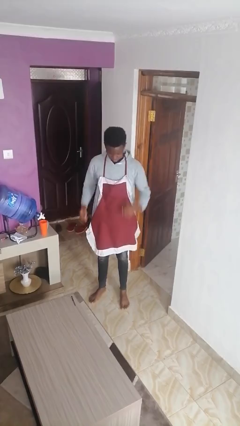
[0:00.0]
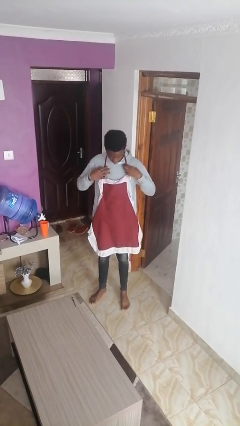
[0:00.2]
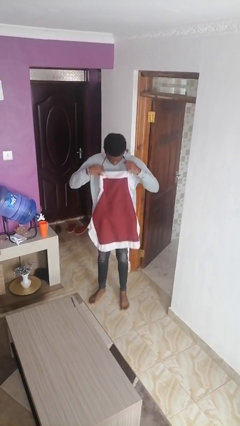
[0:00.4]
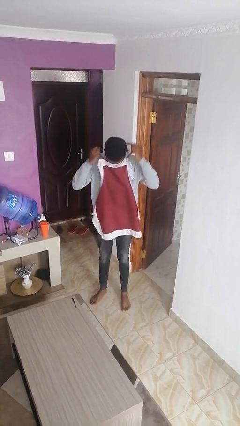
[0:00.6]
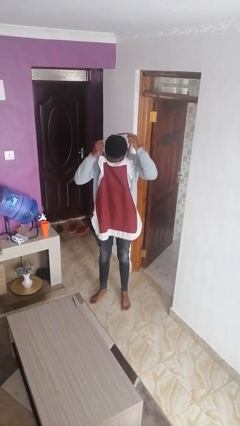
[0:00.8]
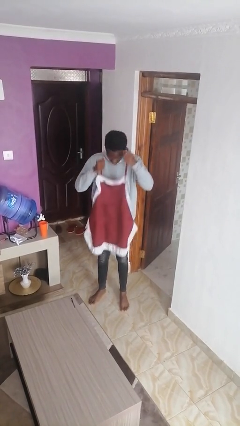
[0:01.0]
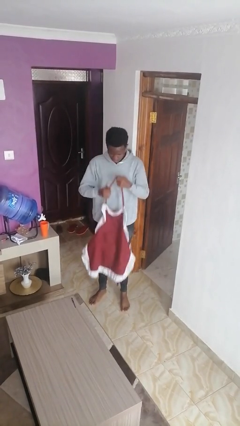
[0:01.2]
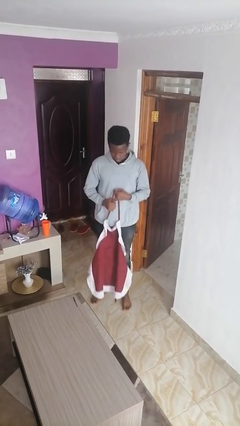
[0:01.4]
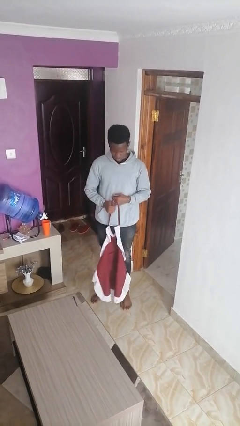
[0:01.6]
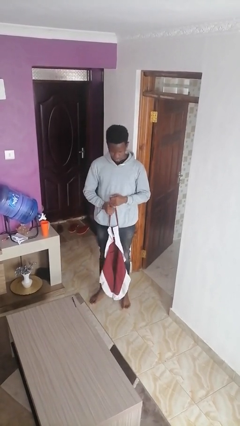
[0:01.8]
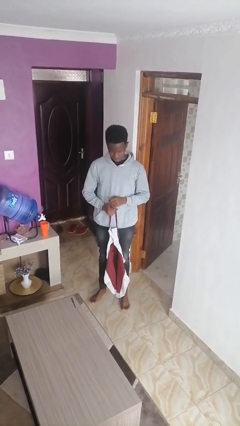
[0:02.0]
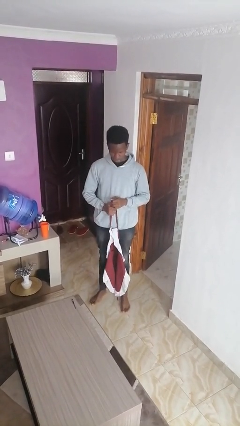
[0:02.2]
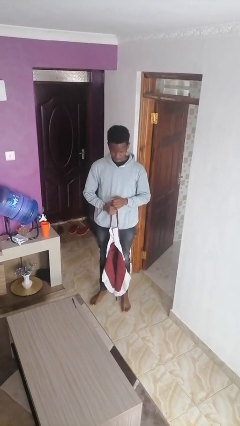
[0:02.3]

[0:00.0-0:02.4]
person takes off apron

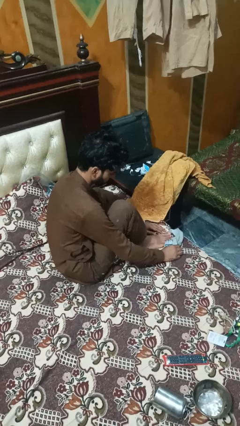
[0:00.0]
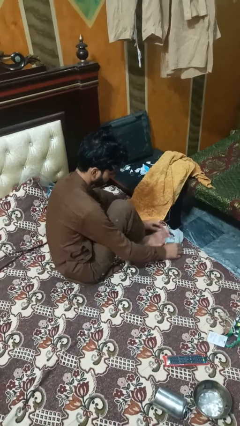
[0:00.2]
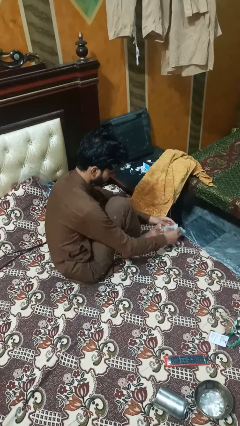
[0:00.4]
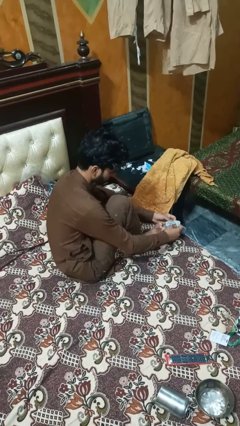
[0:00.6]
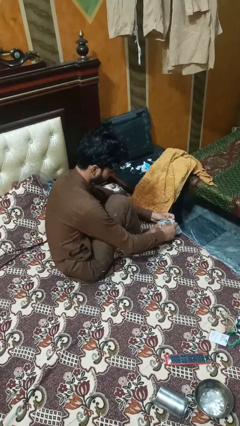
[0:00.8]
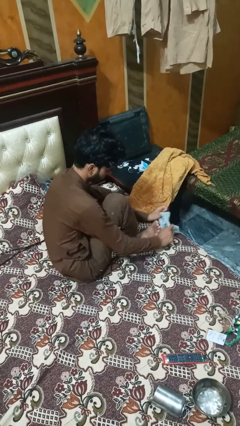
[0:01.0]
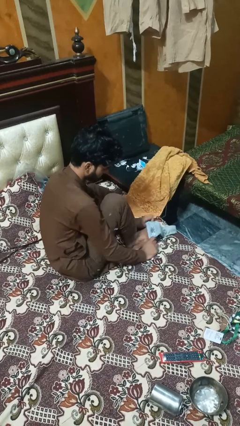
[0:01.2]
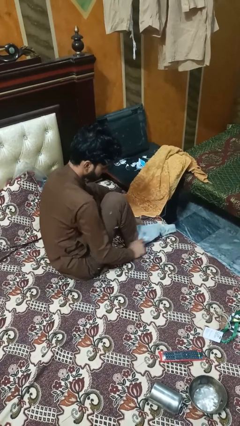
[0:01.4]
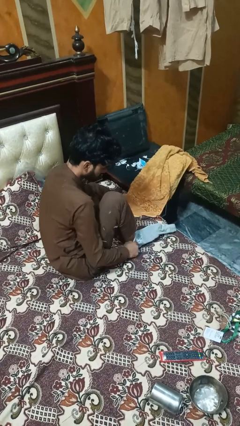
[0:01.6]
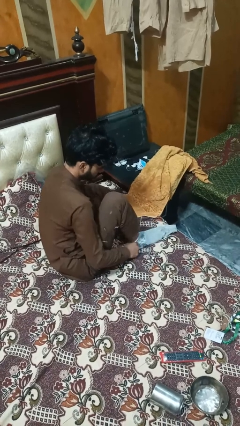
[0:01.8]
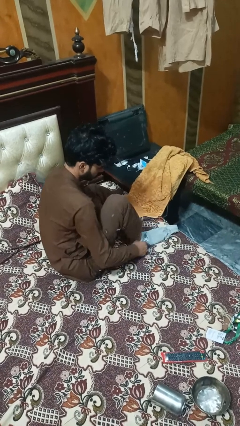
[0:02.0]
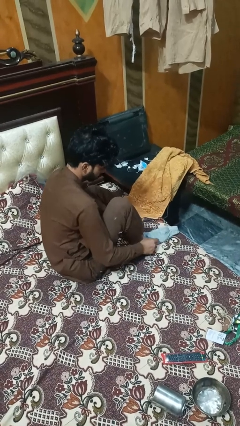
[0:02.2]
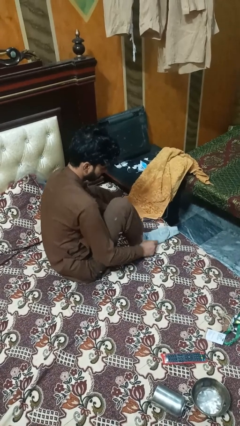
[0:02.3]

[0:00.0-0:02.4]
person puts on socks

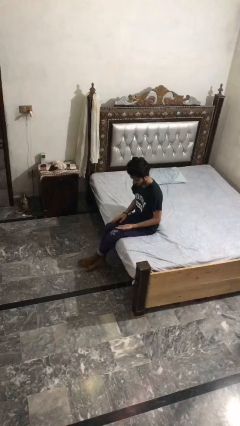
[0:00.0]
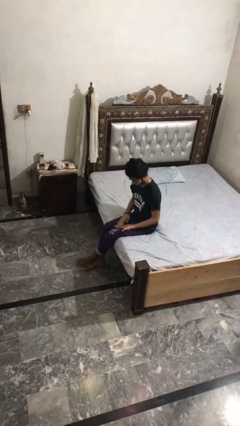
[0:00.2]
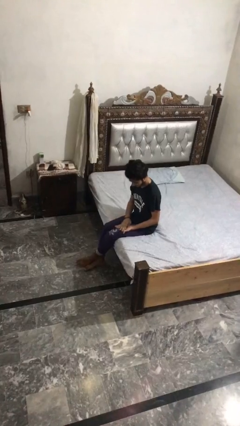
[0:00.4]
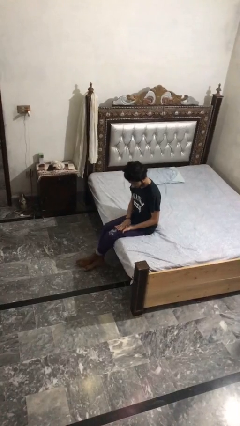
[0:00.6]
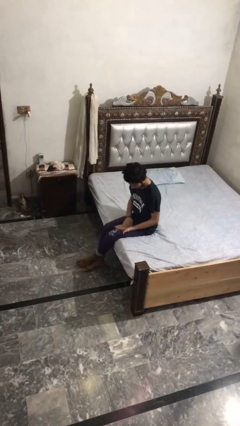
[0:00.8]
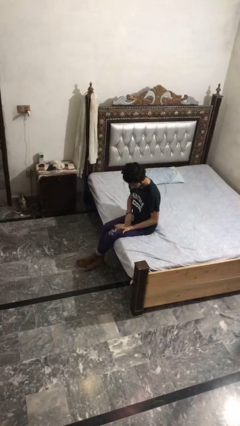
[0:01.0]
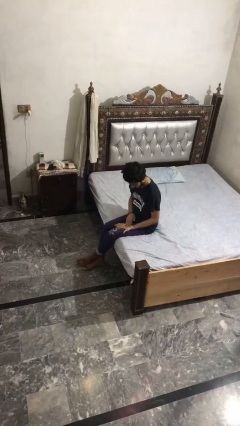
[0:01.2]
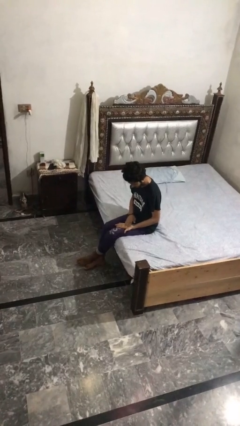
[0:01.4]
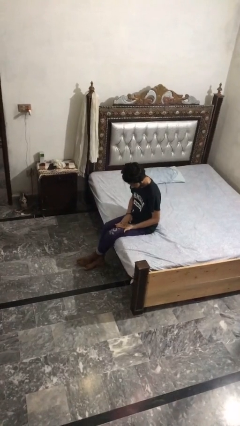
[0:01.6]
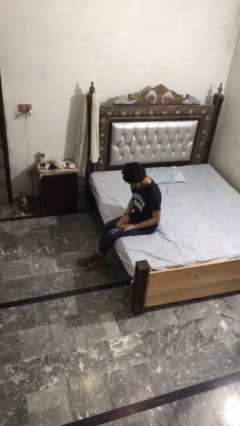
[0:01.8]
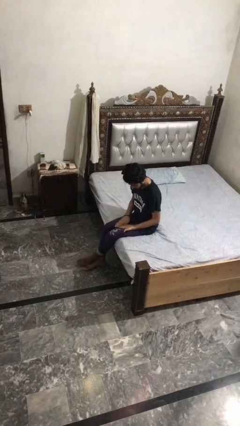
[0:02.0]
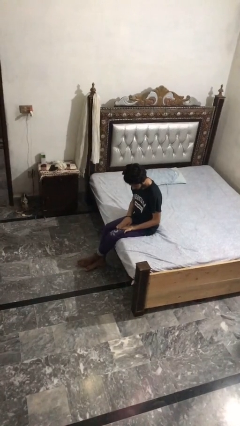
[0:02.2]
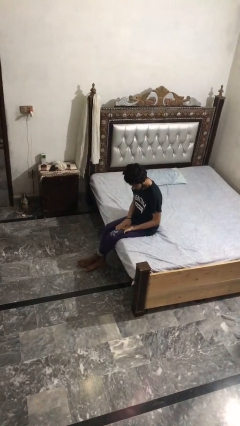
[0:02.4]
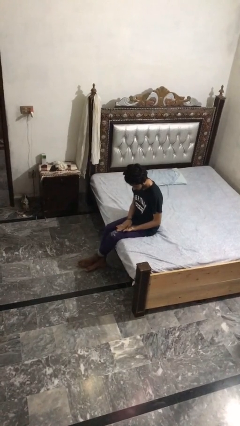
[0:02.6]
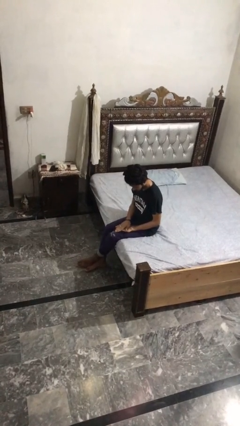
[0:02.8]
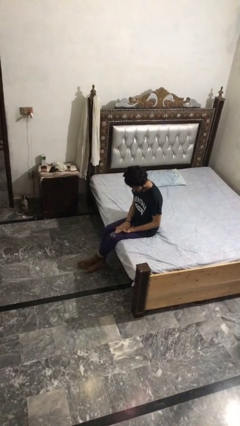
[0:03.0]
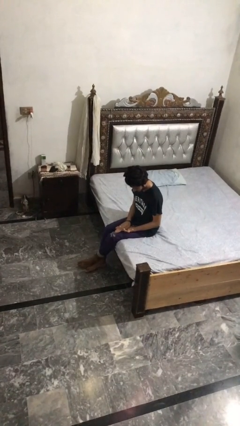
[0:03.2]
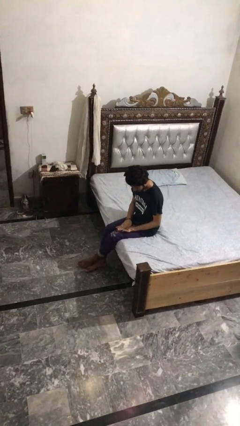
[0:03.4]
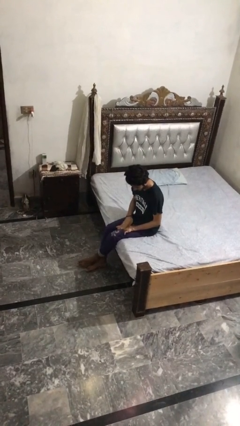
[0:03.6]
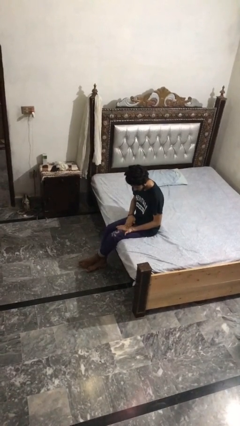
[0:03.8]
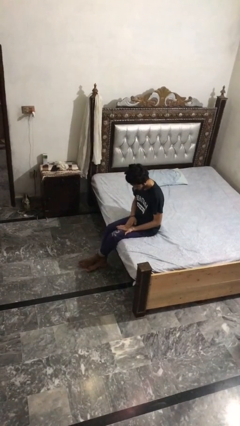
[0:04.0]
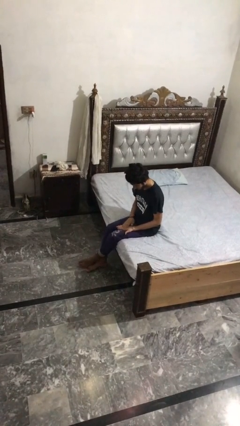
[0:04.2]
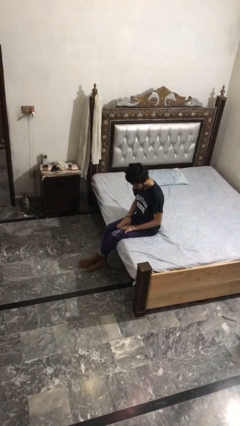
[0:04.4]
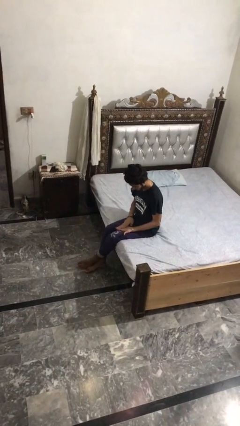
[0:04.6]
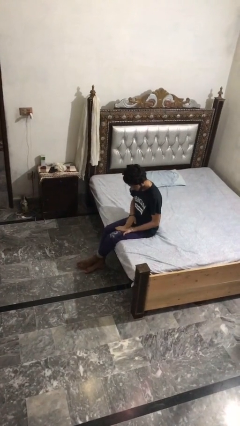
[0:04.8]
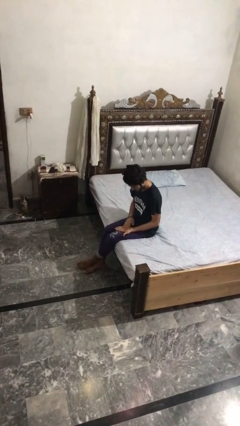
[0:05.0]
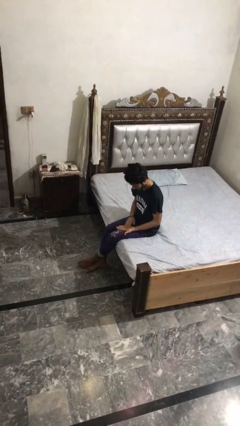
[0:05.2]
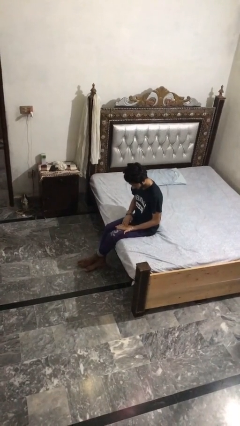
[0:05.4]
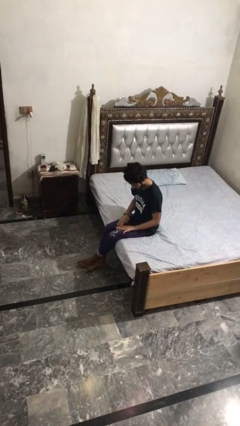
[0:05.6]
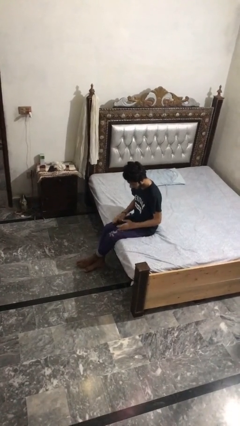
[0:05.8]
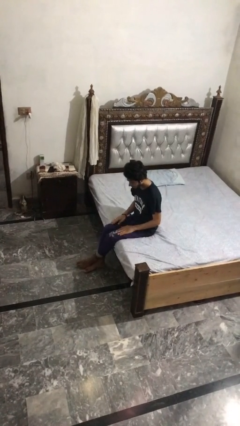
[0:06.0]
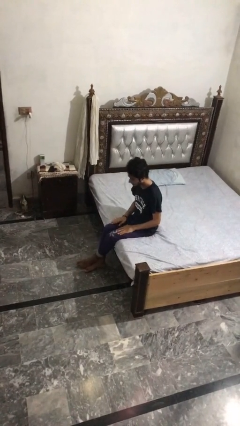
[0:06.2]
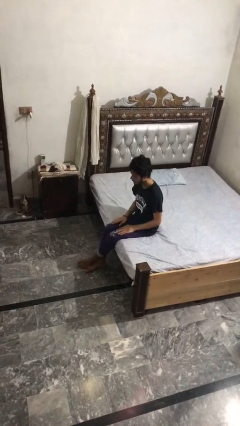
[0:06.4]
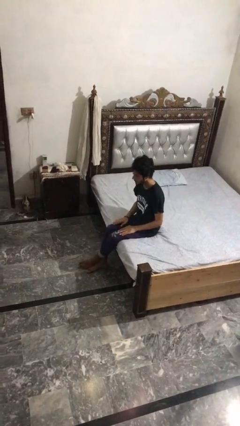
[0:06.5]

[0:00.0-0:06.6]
person looks at hands in lap

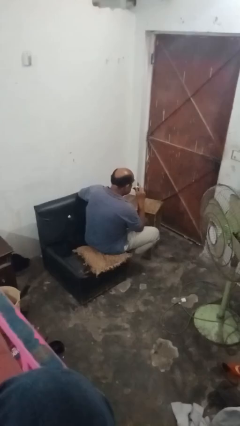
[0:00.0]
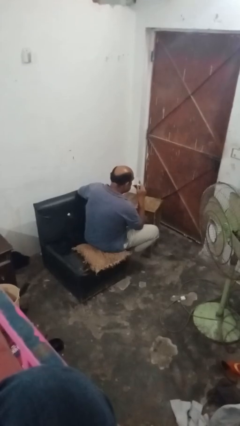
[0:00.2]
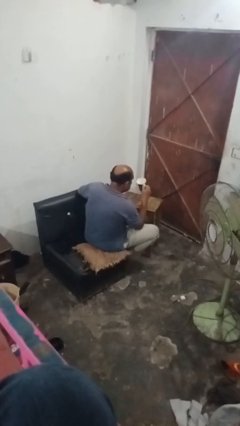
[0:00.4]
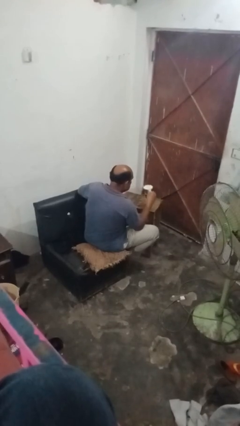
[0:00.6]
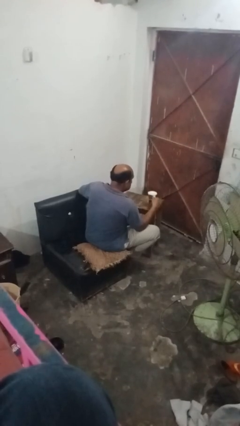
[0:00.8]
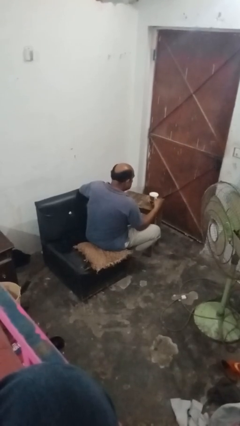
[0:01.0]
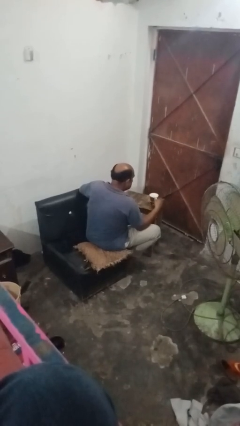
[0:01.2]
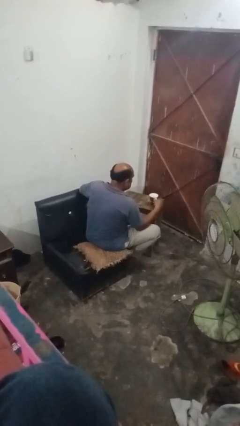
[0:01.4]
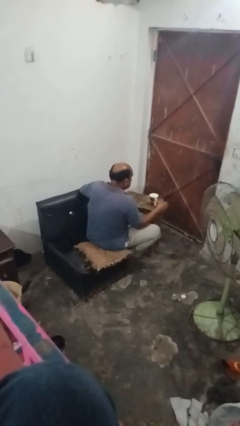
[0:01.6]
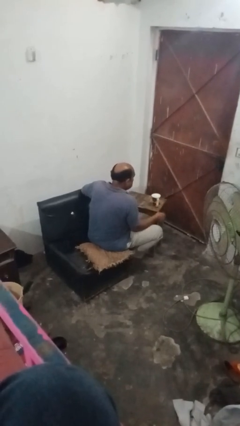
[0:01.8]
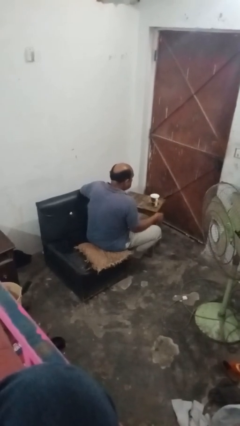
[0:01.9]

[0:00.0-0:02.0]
person puts down object on table

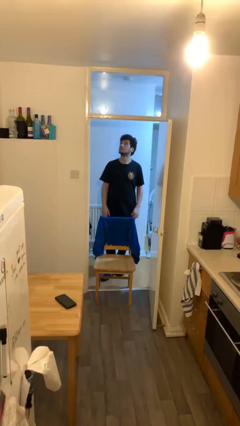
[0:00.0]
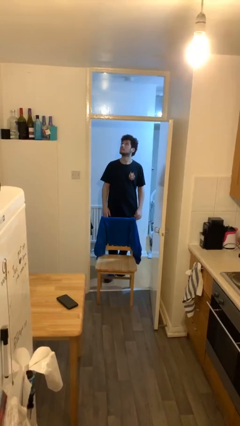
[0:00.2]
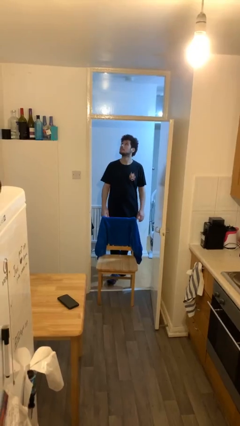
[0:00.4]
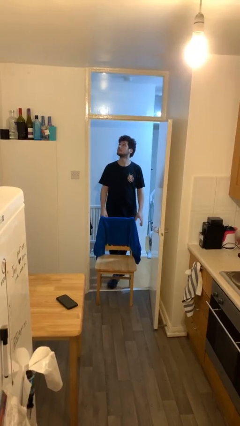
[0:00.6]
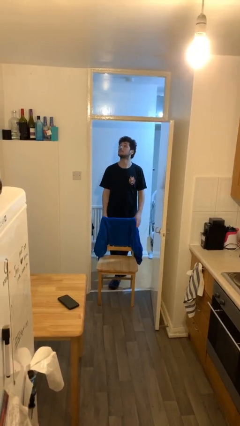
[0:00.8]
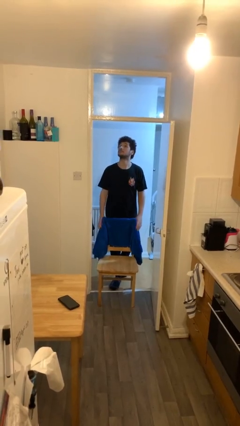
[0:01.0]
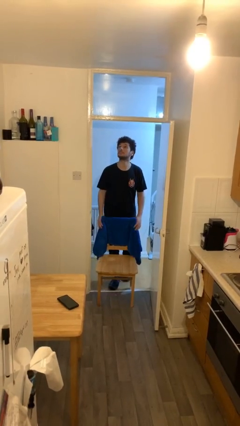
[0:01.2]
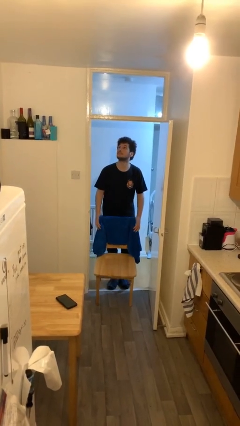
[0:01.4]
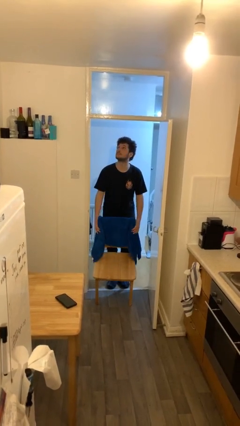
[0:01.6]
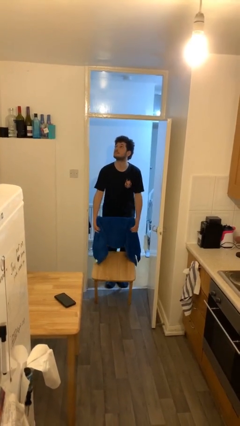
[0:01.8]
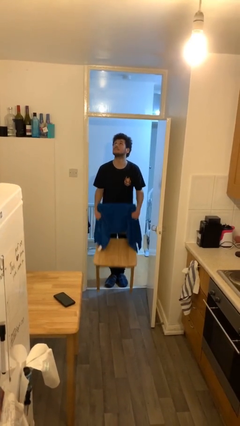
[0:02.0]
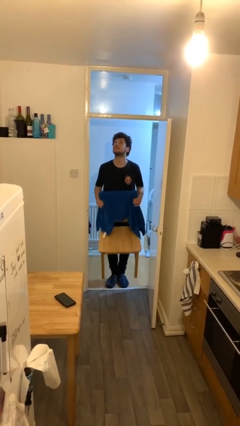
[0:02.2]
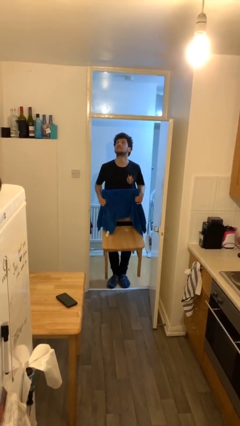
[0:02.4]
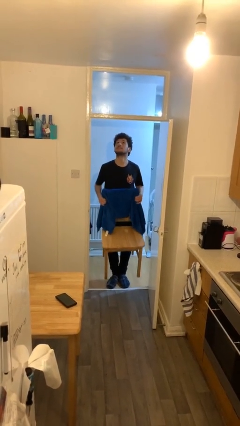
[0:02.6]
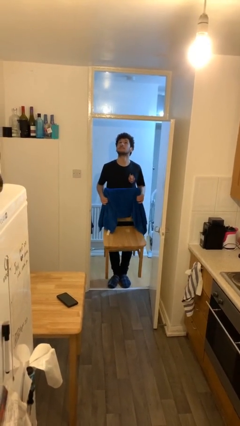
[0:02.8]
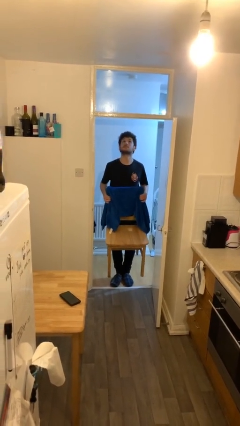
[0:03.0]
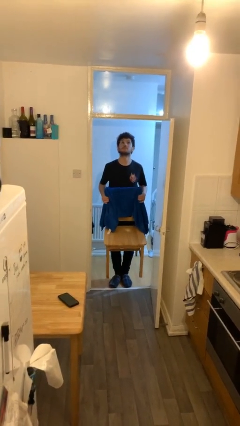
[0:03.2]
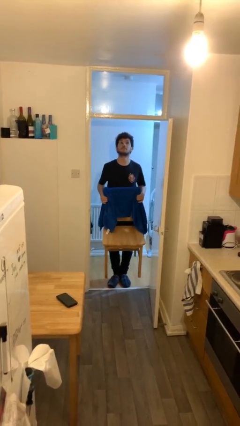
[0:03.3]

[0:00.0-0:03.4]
person picks up object from floor

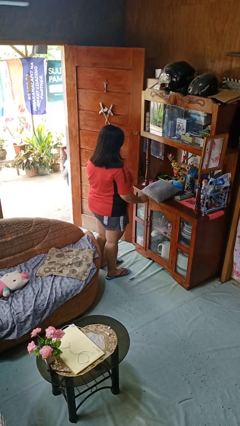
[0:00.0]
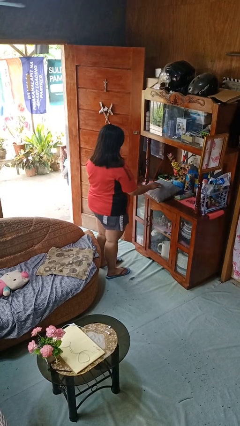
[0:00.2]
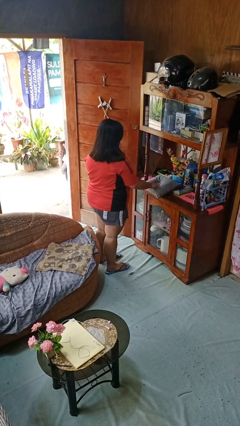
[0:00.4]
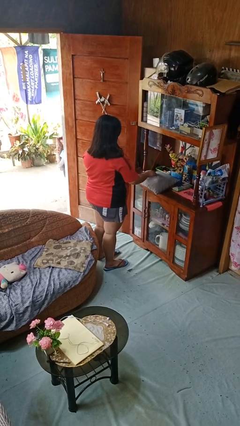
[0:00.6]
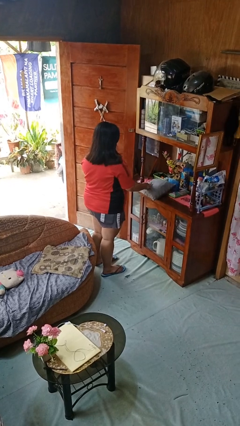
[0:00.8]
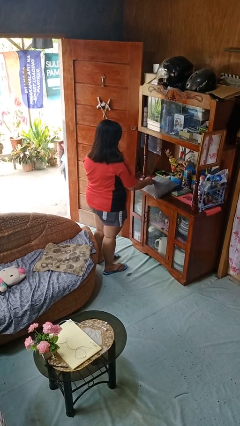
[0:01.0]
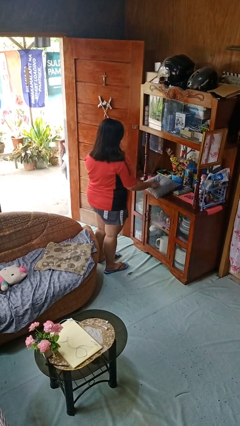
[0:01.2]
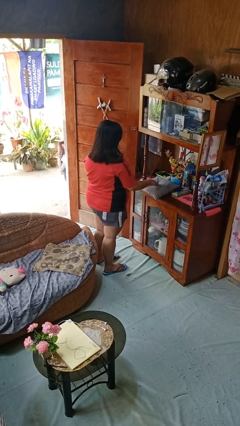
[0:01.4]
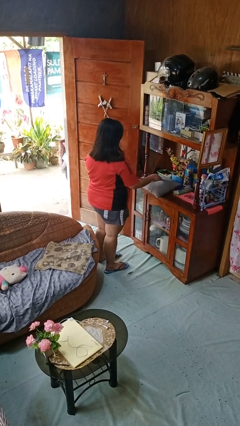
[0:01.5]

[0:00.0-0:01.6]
person taps object with finger
